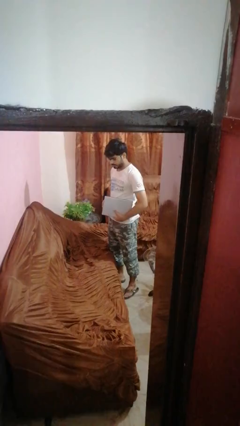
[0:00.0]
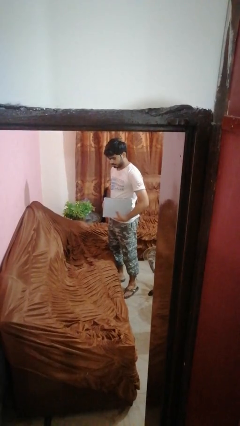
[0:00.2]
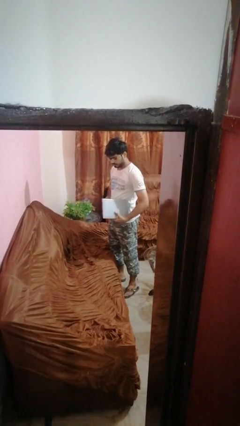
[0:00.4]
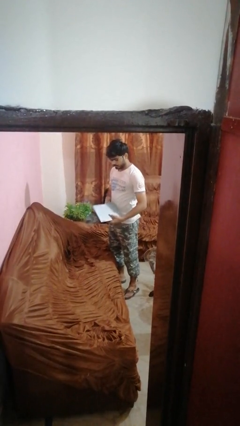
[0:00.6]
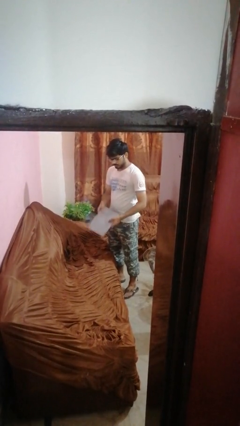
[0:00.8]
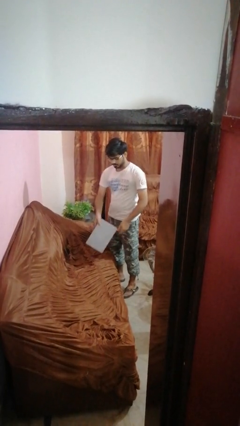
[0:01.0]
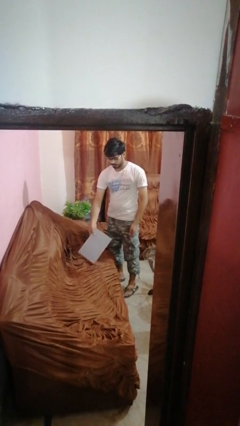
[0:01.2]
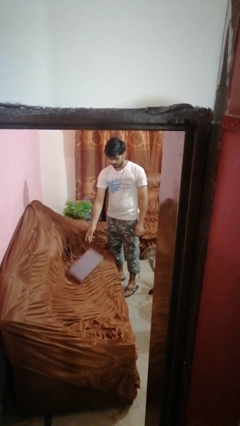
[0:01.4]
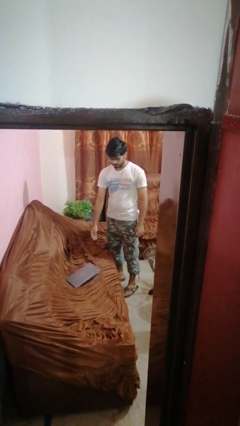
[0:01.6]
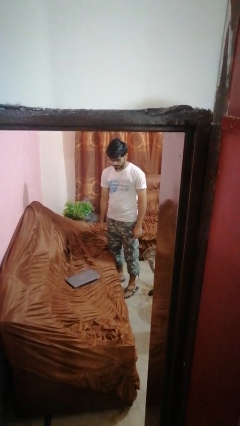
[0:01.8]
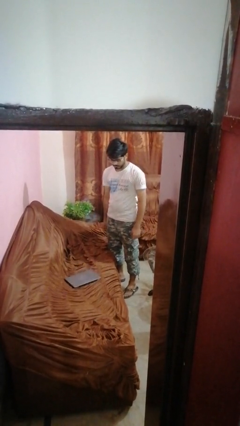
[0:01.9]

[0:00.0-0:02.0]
person puts down object on couch

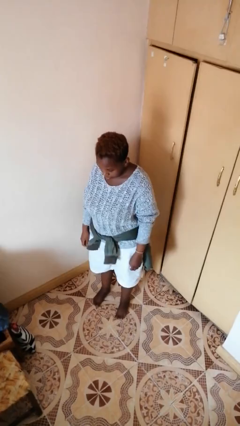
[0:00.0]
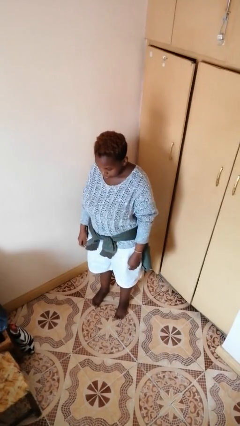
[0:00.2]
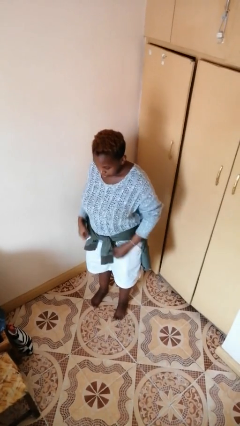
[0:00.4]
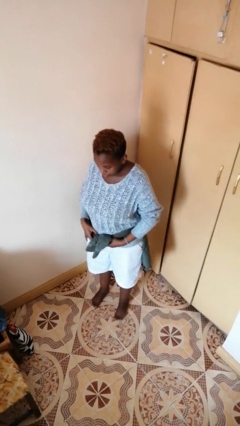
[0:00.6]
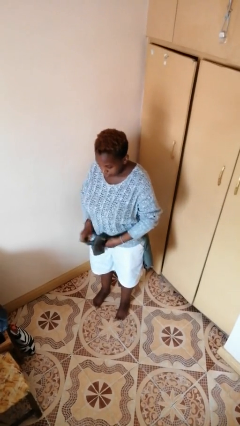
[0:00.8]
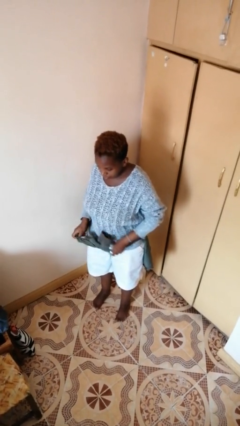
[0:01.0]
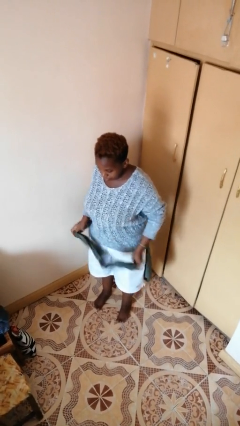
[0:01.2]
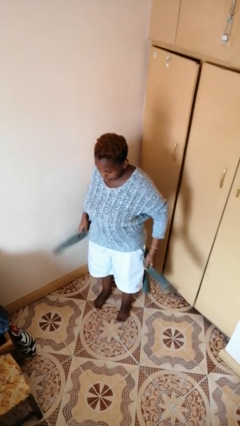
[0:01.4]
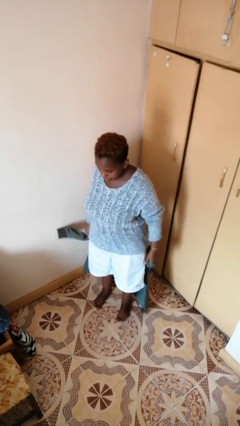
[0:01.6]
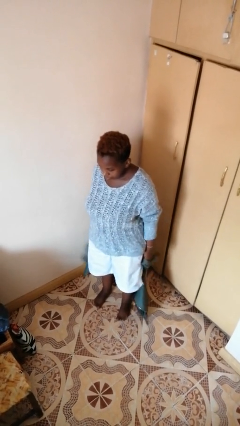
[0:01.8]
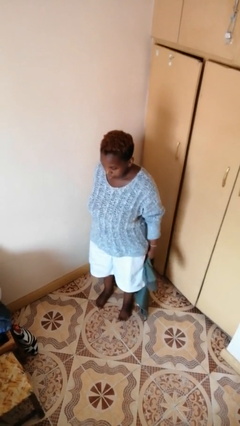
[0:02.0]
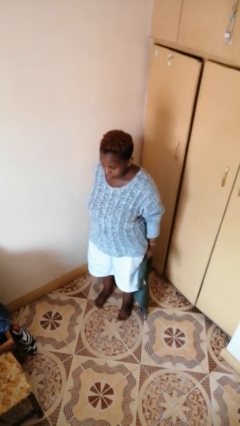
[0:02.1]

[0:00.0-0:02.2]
person unties jacket around waist

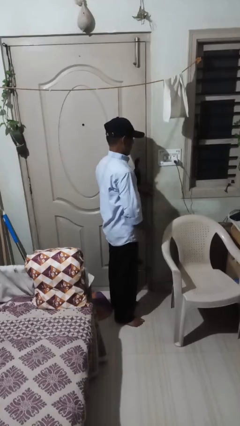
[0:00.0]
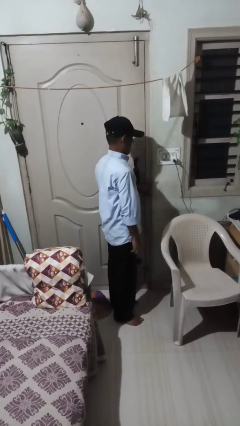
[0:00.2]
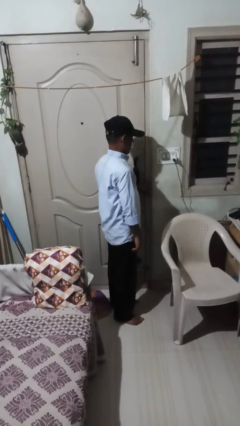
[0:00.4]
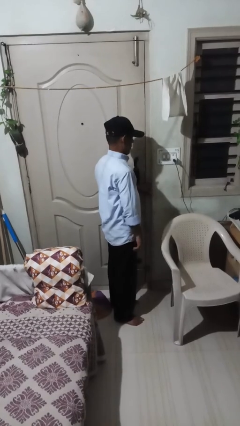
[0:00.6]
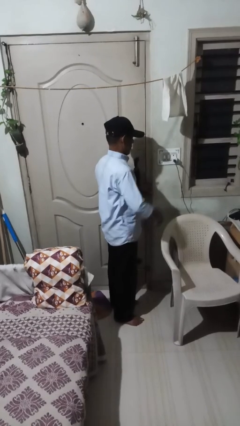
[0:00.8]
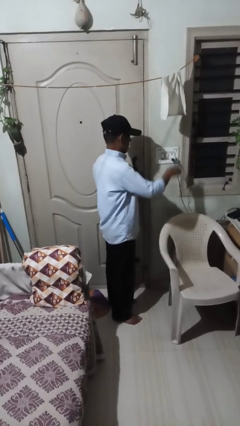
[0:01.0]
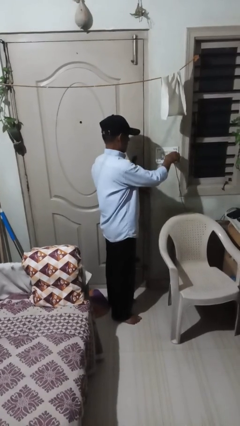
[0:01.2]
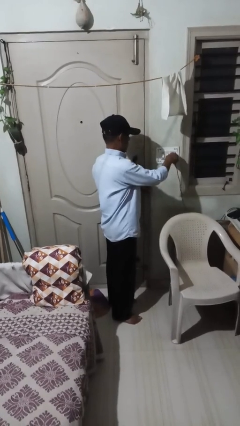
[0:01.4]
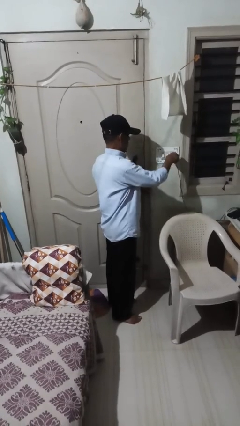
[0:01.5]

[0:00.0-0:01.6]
person unplugs from electrical socket

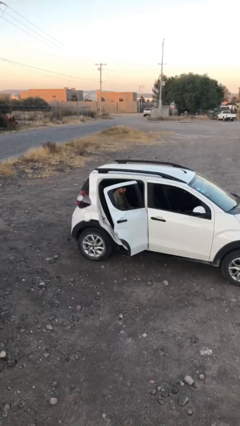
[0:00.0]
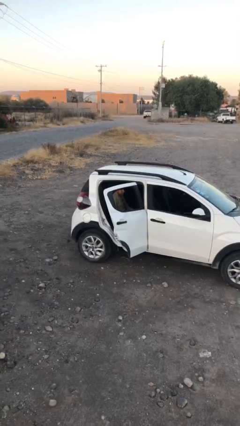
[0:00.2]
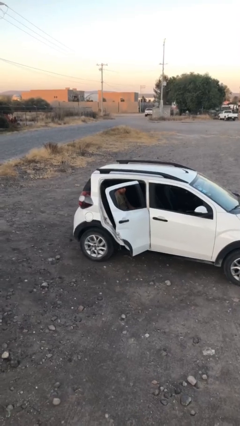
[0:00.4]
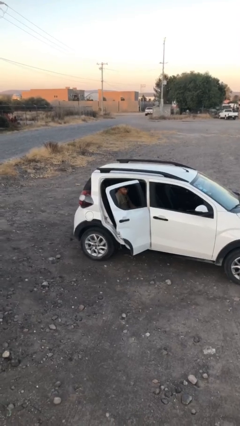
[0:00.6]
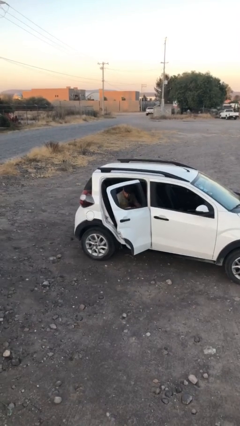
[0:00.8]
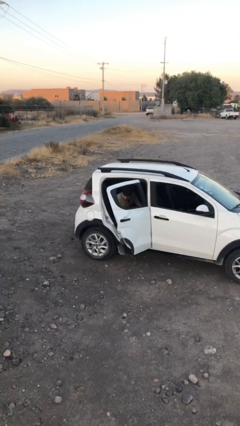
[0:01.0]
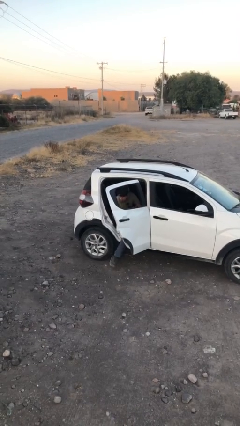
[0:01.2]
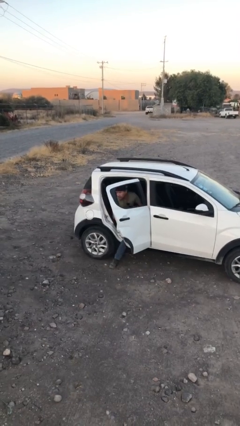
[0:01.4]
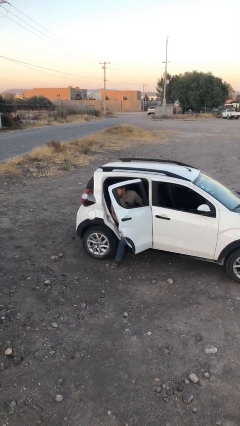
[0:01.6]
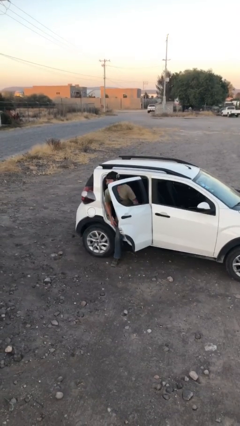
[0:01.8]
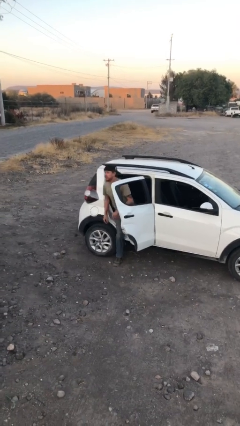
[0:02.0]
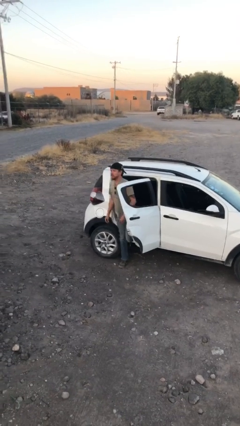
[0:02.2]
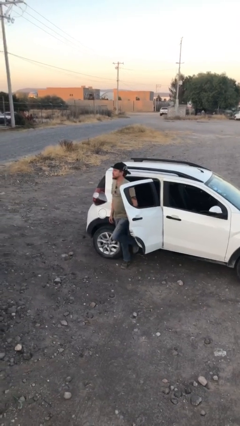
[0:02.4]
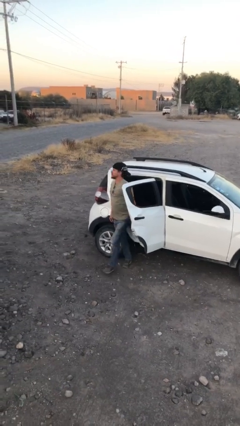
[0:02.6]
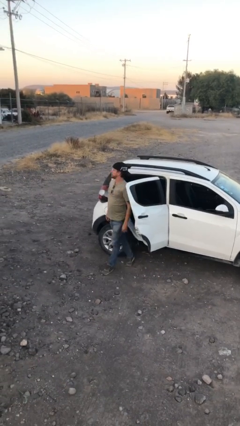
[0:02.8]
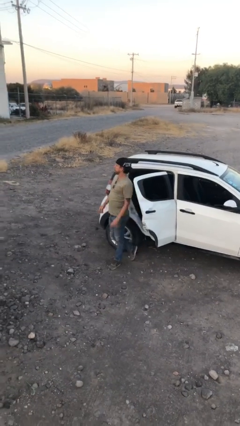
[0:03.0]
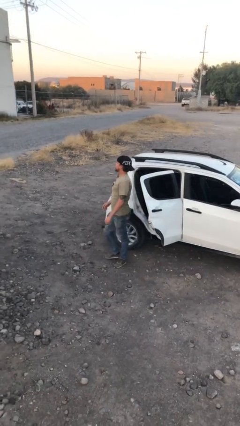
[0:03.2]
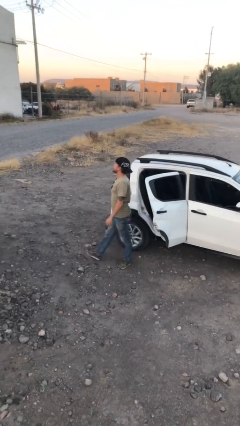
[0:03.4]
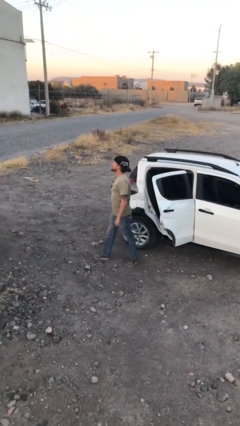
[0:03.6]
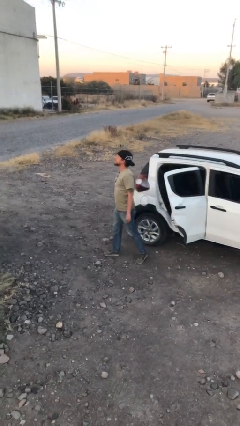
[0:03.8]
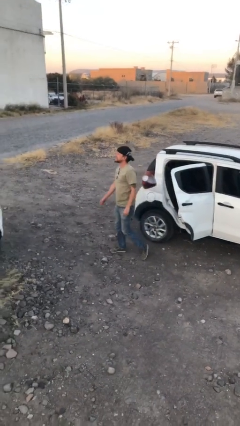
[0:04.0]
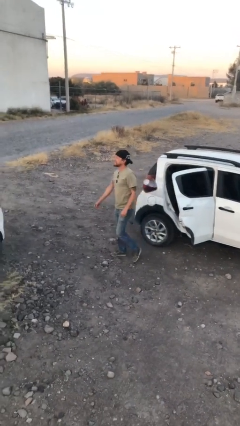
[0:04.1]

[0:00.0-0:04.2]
person exits car

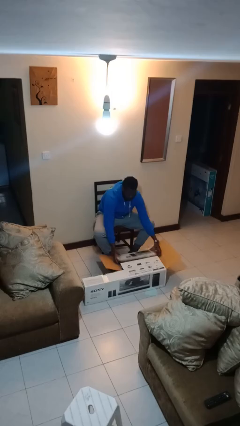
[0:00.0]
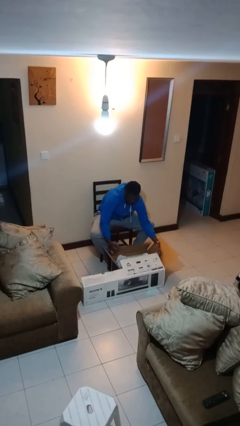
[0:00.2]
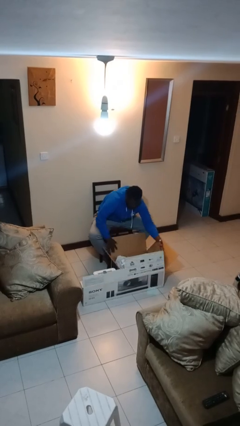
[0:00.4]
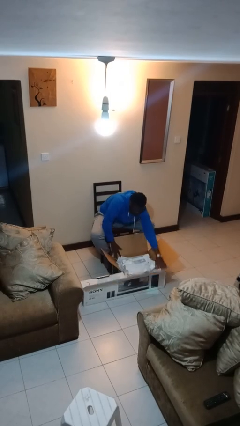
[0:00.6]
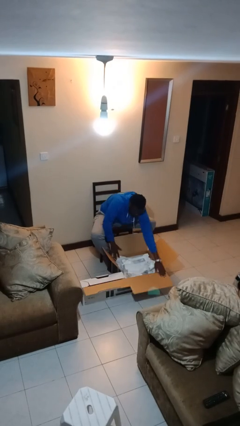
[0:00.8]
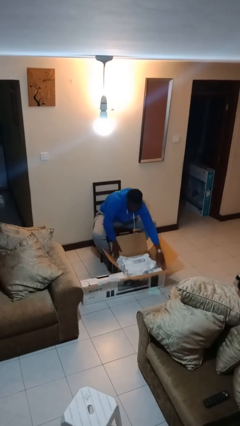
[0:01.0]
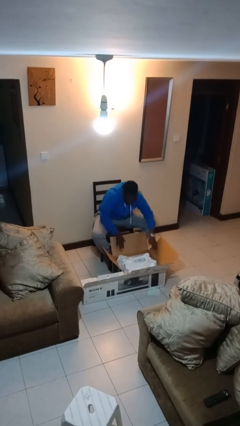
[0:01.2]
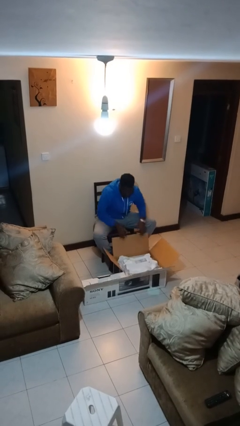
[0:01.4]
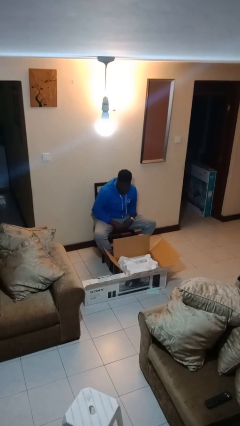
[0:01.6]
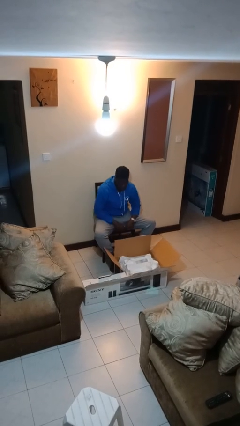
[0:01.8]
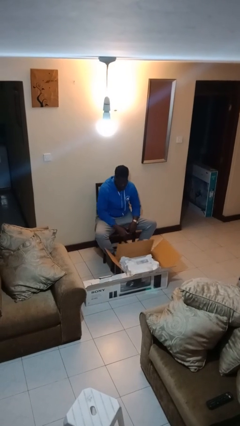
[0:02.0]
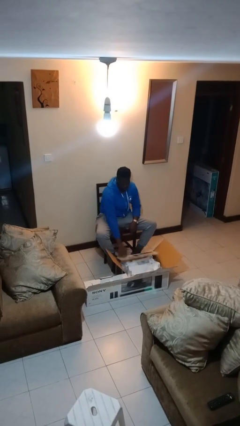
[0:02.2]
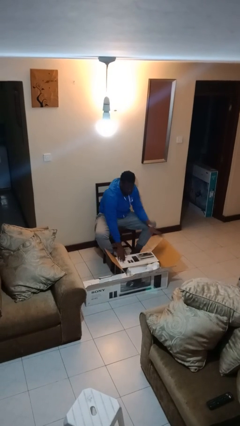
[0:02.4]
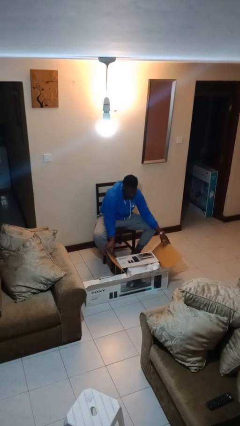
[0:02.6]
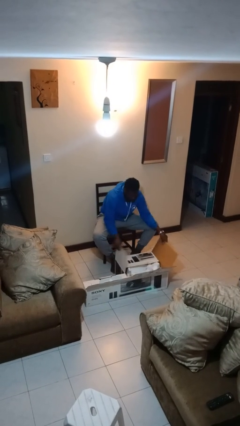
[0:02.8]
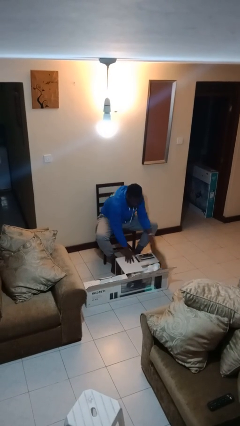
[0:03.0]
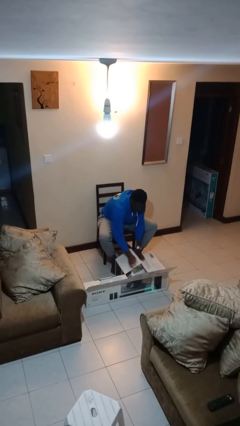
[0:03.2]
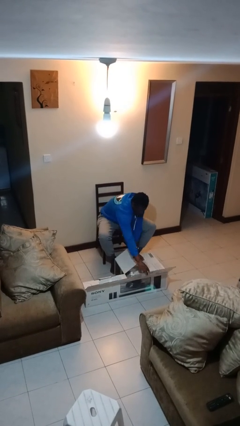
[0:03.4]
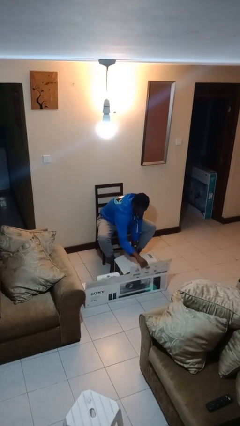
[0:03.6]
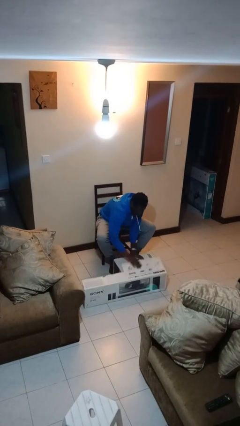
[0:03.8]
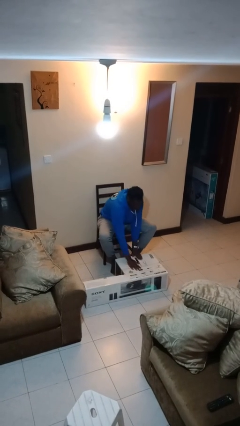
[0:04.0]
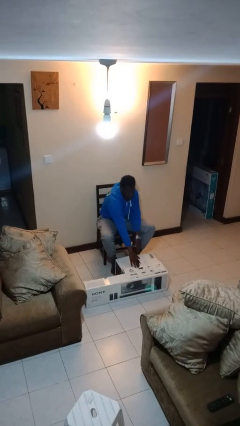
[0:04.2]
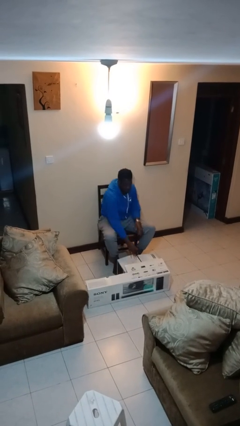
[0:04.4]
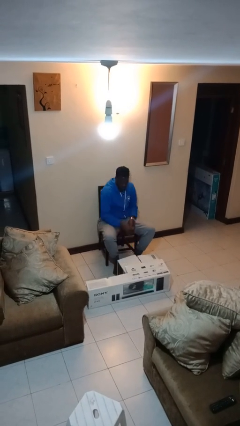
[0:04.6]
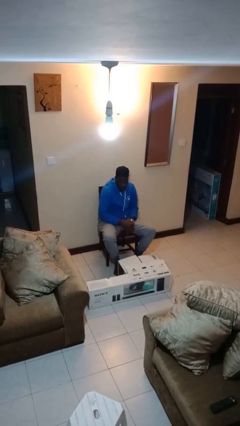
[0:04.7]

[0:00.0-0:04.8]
person closes box

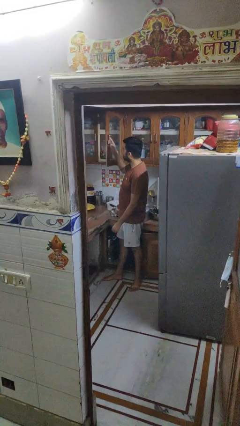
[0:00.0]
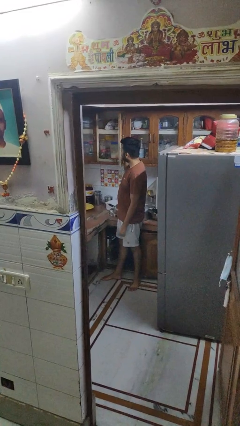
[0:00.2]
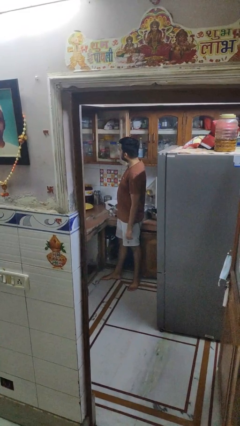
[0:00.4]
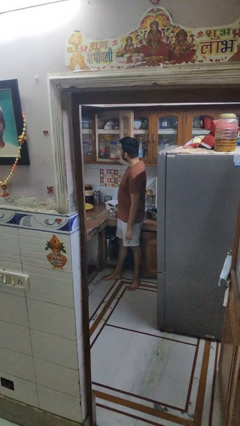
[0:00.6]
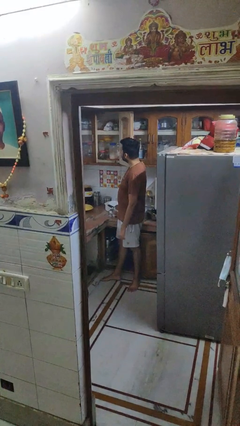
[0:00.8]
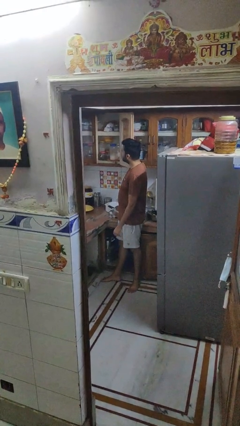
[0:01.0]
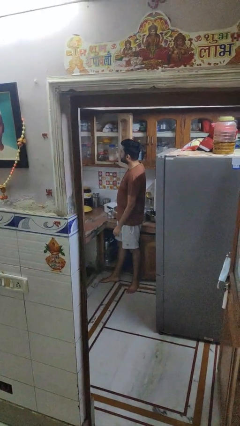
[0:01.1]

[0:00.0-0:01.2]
person opens cabinet

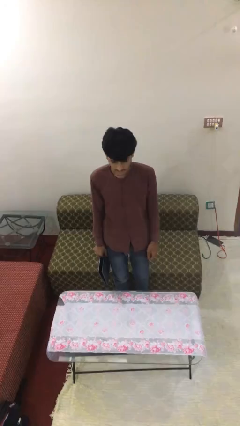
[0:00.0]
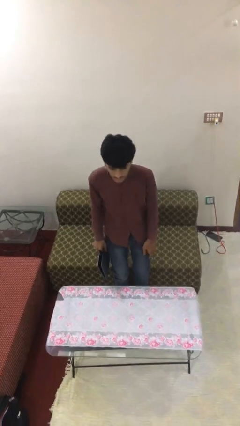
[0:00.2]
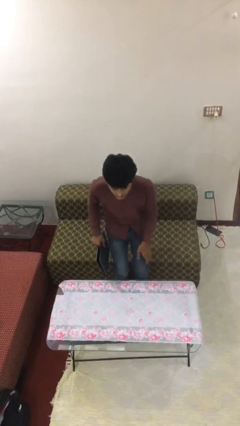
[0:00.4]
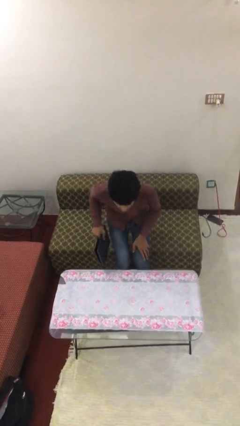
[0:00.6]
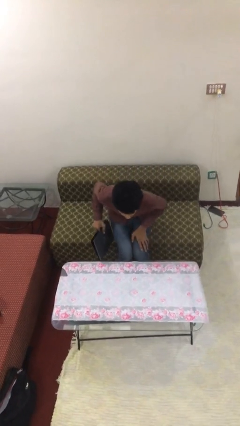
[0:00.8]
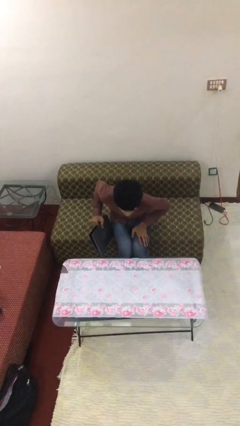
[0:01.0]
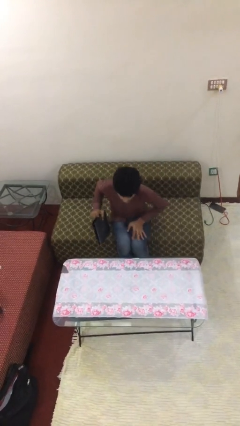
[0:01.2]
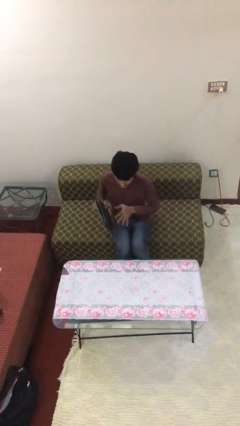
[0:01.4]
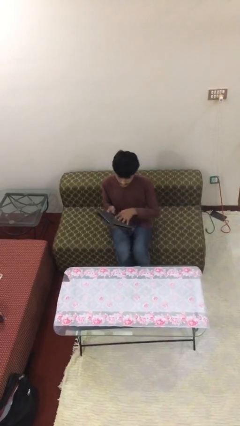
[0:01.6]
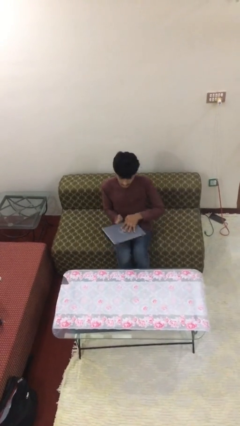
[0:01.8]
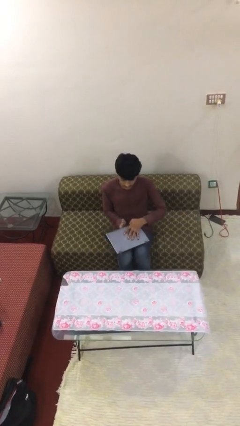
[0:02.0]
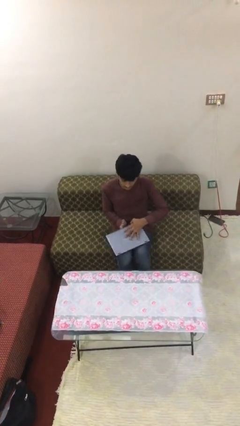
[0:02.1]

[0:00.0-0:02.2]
person sits down
